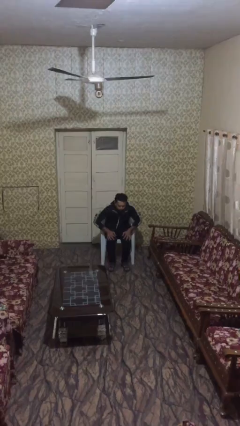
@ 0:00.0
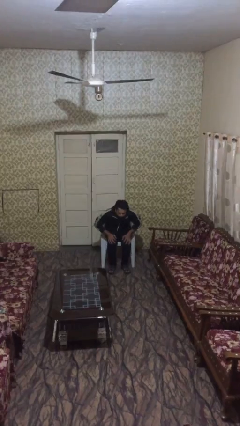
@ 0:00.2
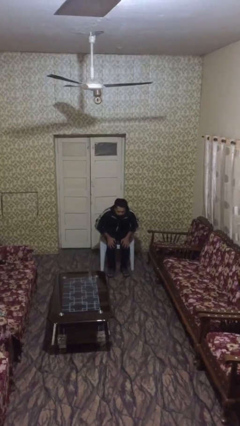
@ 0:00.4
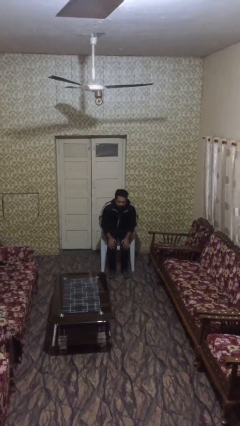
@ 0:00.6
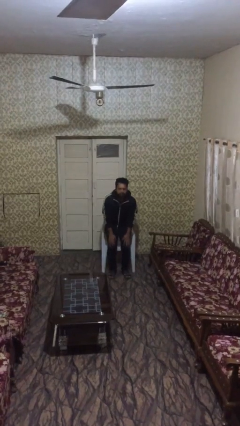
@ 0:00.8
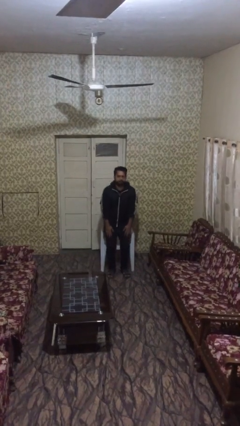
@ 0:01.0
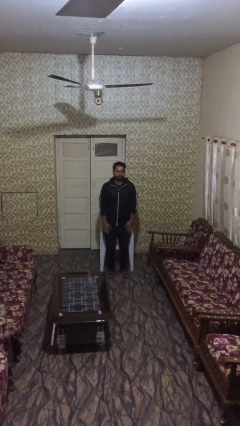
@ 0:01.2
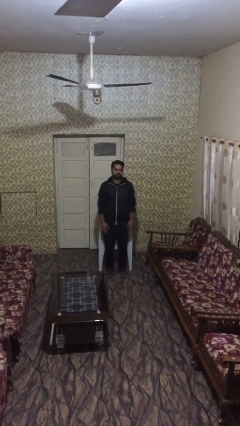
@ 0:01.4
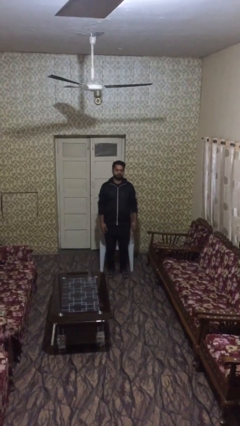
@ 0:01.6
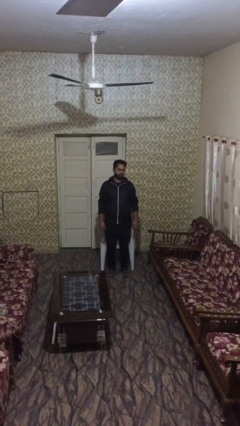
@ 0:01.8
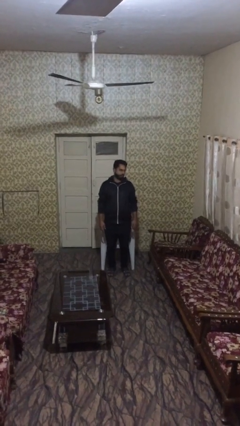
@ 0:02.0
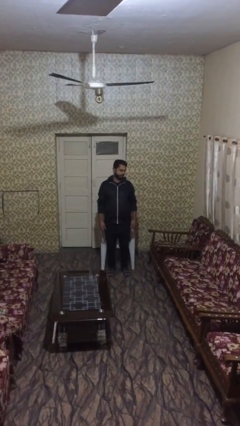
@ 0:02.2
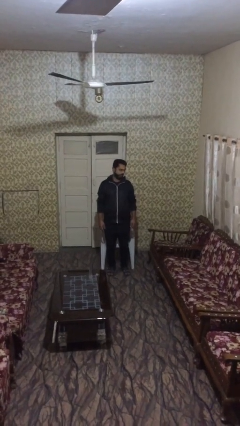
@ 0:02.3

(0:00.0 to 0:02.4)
person stands up

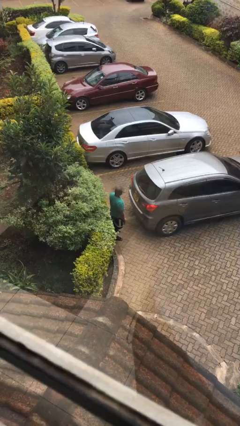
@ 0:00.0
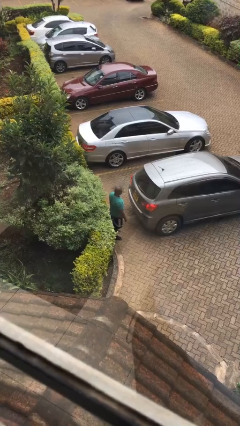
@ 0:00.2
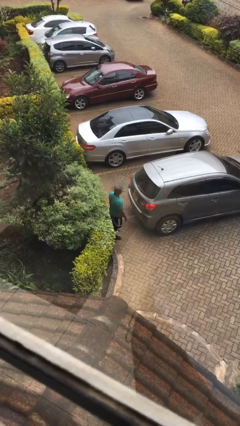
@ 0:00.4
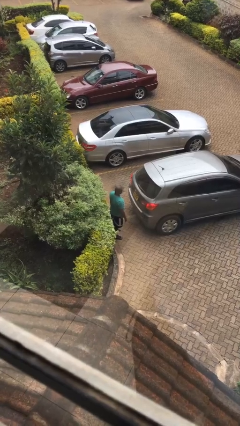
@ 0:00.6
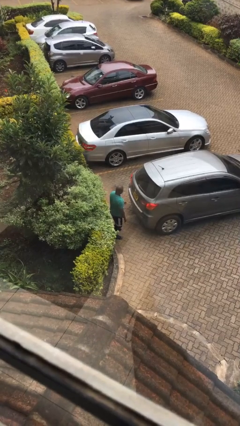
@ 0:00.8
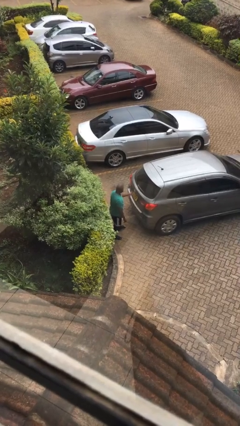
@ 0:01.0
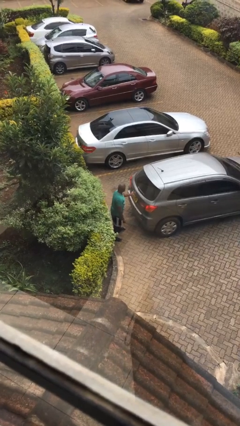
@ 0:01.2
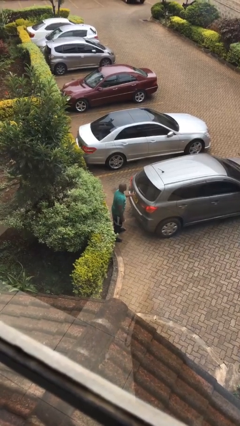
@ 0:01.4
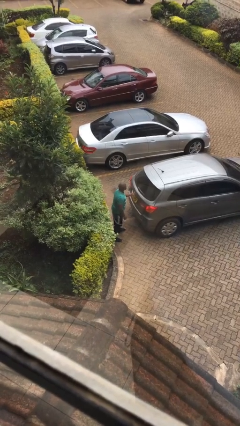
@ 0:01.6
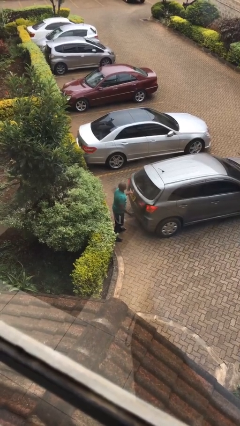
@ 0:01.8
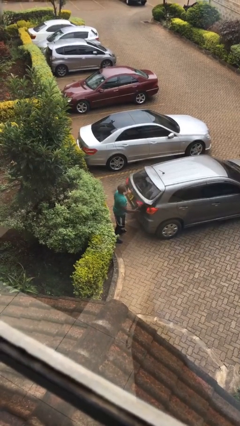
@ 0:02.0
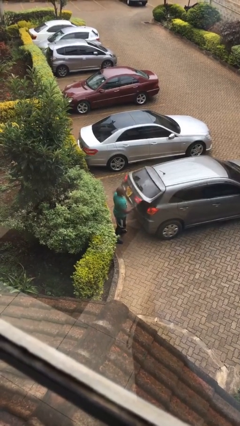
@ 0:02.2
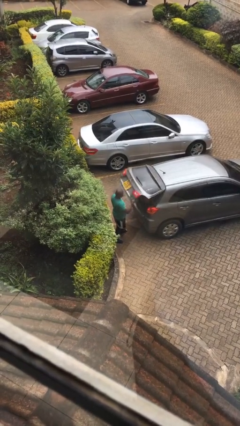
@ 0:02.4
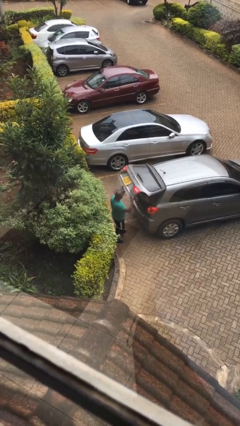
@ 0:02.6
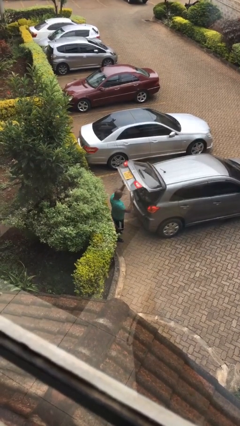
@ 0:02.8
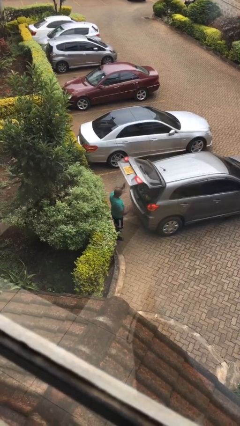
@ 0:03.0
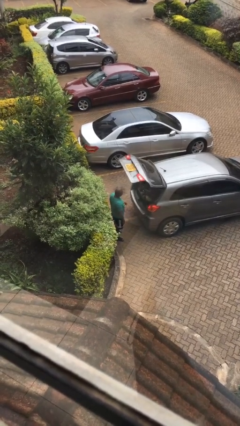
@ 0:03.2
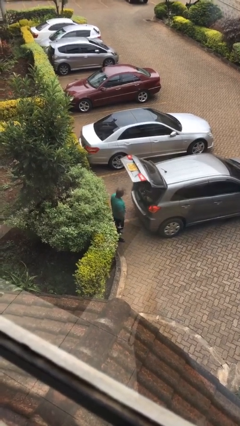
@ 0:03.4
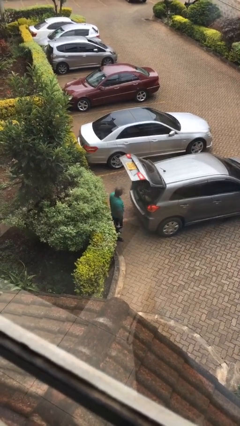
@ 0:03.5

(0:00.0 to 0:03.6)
person opens car trunk

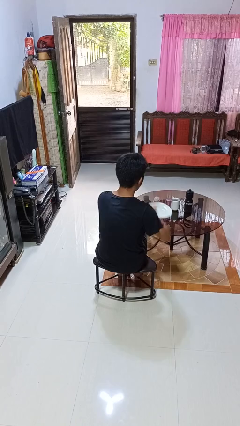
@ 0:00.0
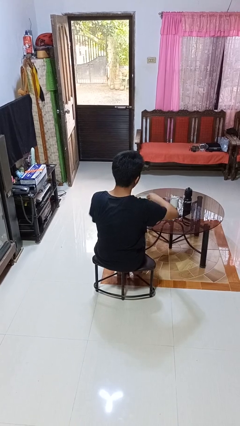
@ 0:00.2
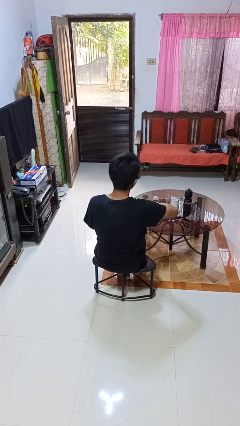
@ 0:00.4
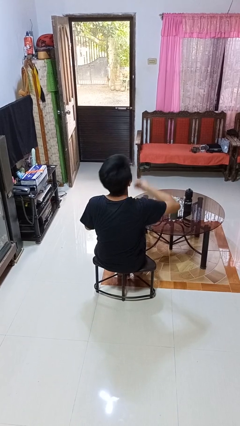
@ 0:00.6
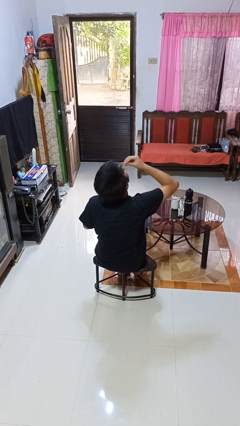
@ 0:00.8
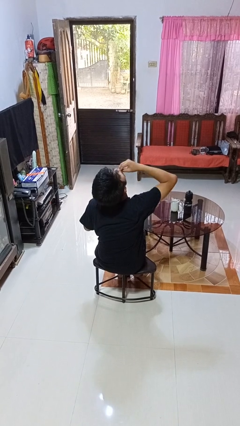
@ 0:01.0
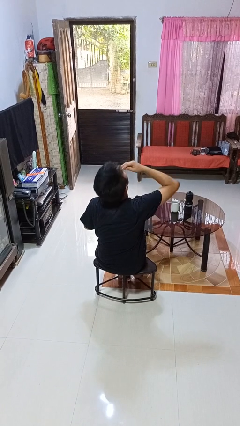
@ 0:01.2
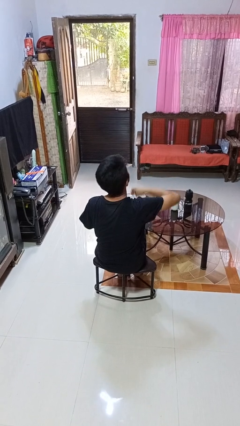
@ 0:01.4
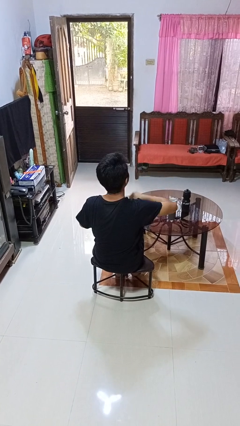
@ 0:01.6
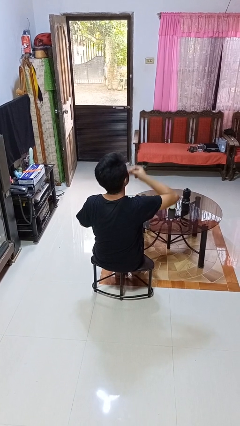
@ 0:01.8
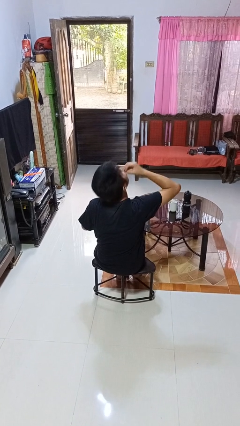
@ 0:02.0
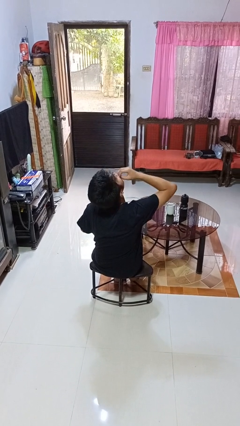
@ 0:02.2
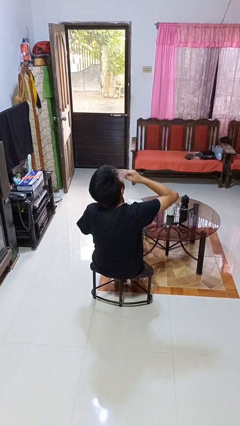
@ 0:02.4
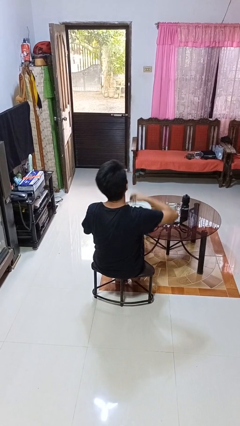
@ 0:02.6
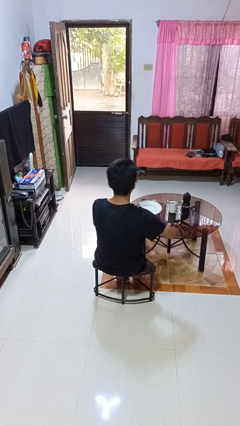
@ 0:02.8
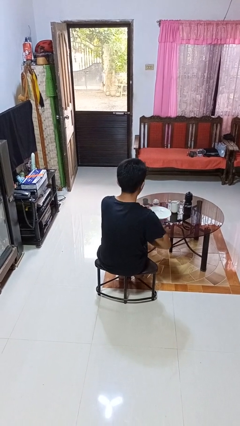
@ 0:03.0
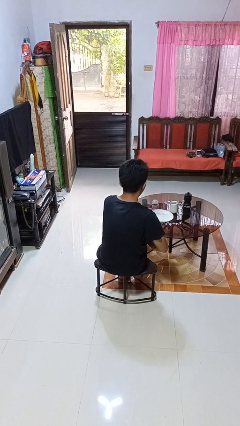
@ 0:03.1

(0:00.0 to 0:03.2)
person eats with hands

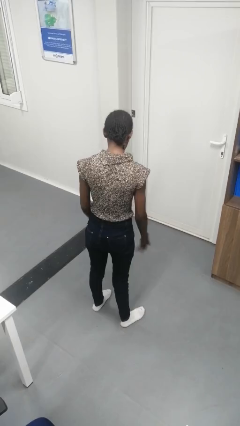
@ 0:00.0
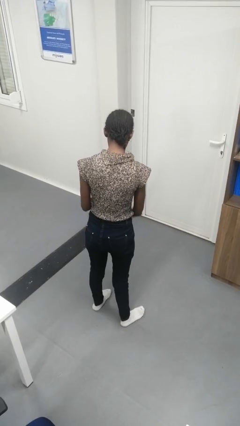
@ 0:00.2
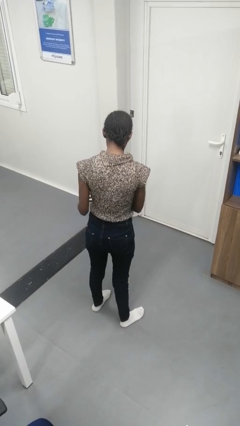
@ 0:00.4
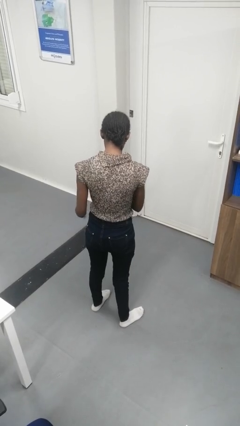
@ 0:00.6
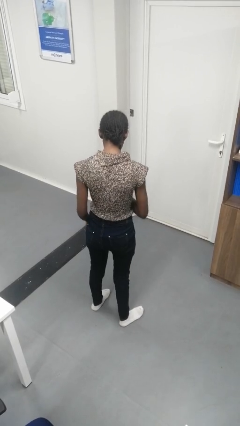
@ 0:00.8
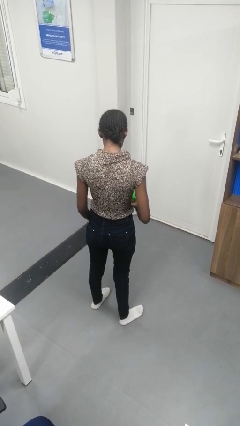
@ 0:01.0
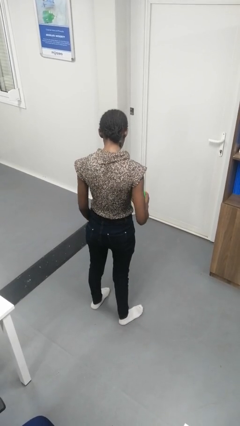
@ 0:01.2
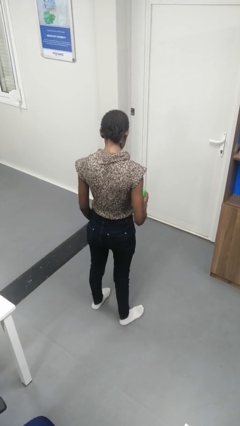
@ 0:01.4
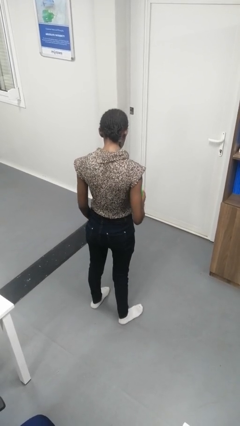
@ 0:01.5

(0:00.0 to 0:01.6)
person bounces ball on floor

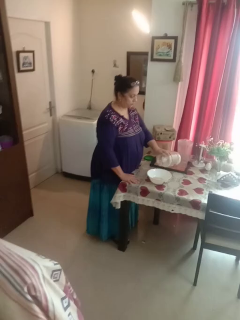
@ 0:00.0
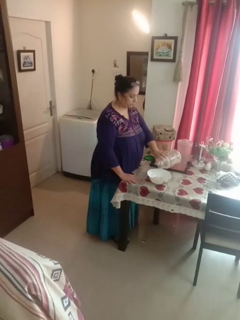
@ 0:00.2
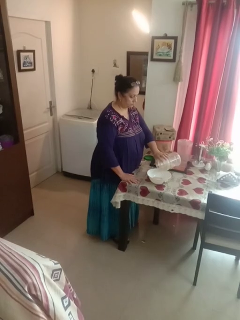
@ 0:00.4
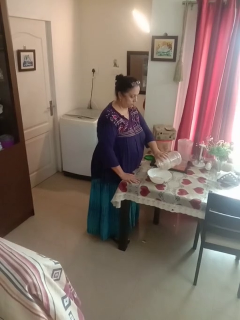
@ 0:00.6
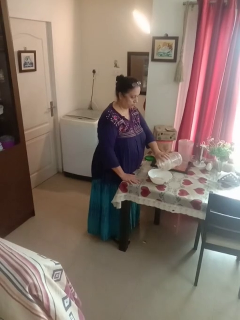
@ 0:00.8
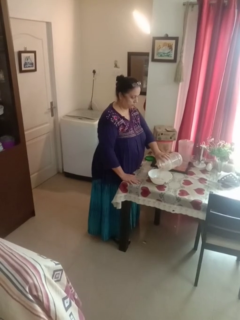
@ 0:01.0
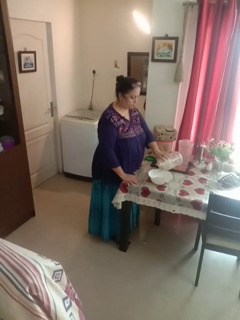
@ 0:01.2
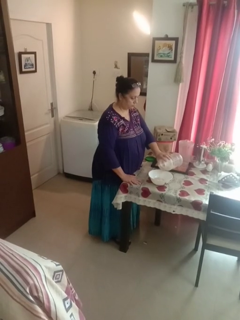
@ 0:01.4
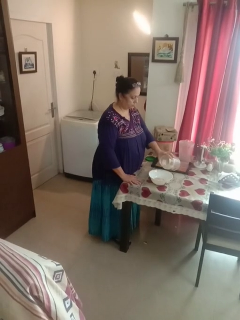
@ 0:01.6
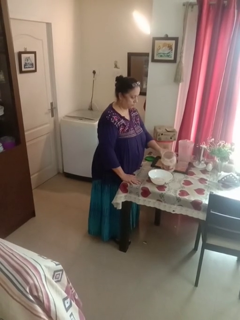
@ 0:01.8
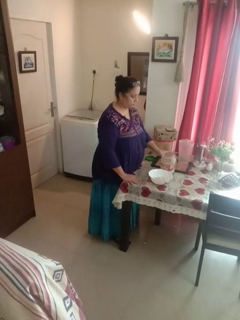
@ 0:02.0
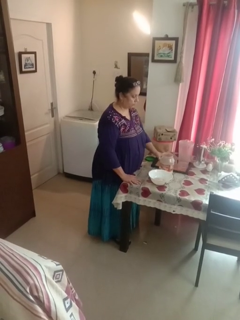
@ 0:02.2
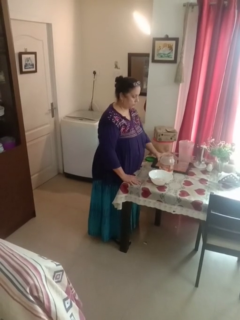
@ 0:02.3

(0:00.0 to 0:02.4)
person pours into bowl

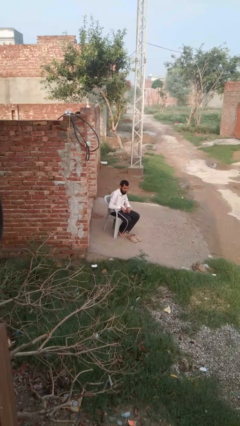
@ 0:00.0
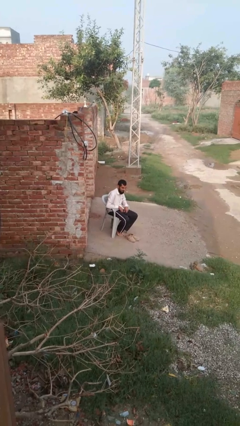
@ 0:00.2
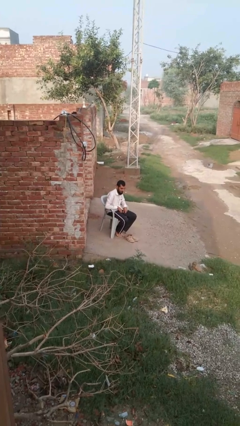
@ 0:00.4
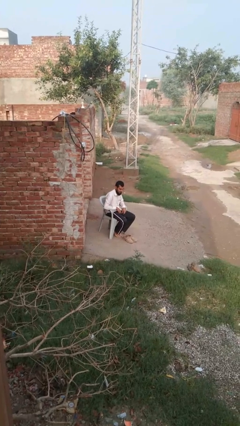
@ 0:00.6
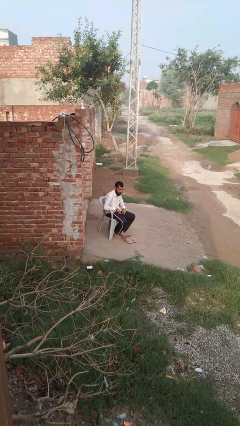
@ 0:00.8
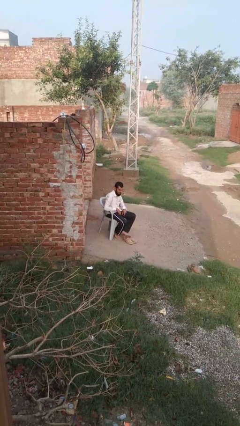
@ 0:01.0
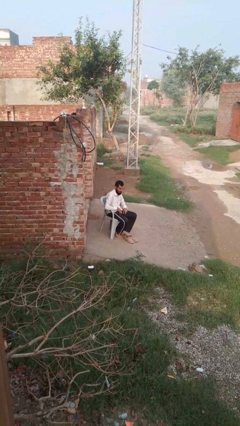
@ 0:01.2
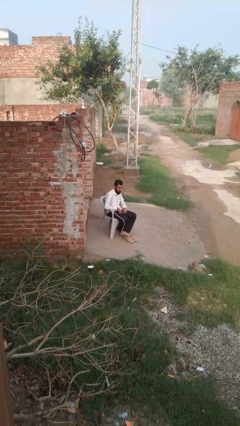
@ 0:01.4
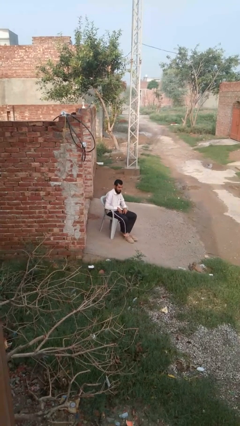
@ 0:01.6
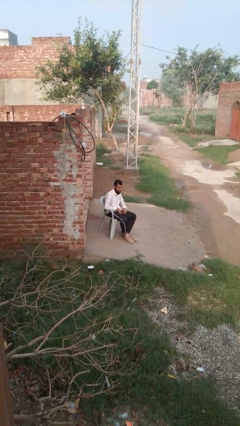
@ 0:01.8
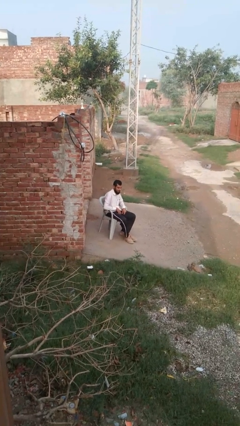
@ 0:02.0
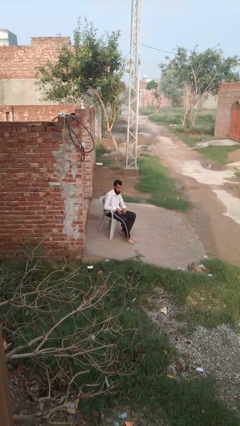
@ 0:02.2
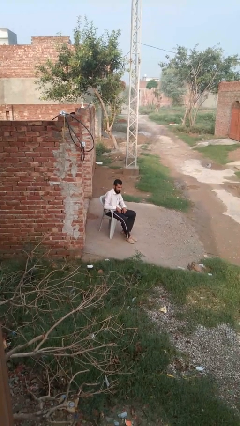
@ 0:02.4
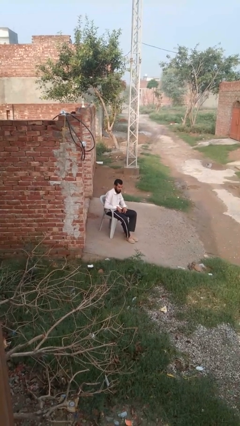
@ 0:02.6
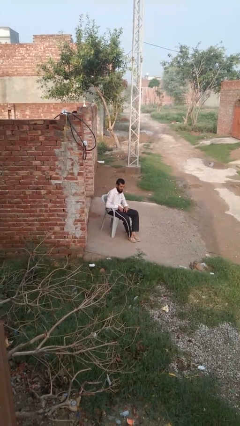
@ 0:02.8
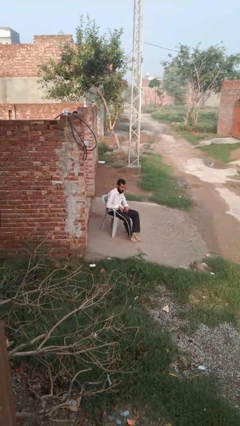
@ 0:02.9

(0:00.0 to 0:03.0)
person puts on shoes

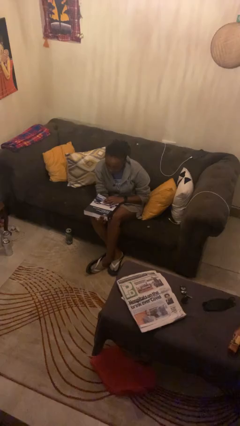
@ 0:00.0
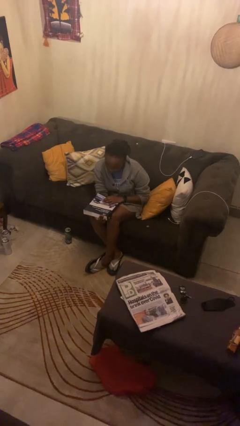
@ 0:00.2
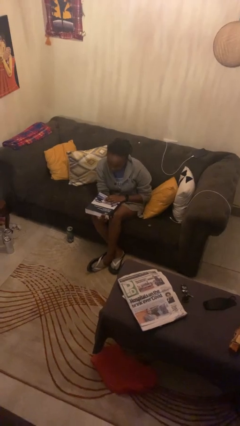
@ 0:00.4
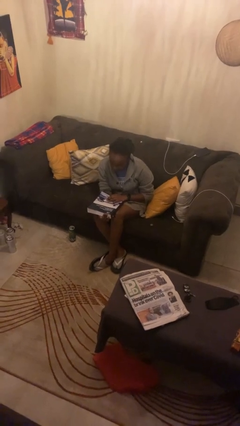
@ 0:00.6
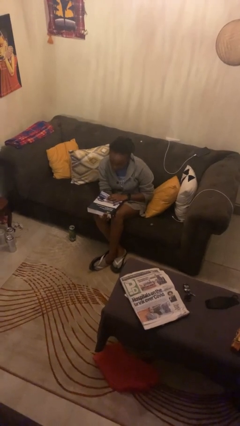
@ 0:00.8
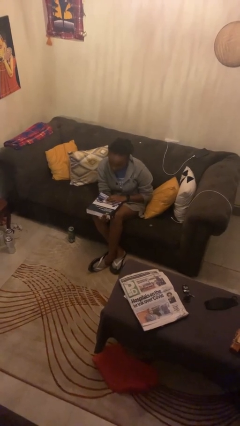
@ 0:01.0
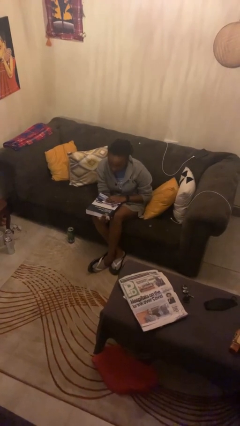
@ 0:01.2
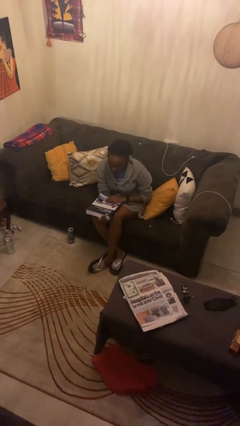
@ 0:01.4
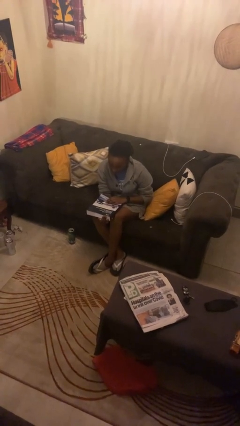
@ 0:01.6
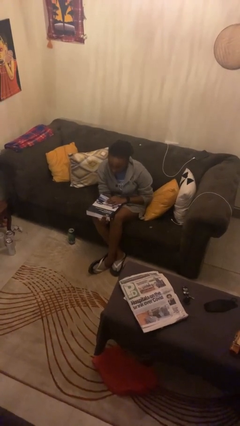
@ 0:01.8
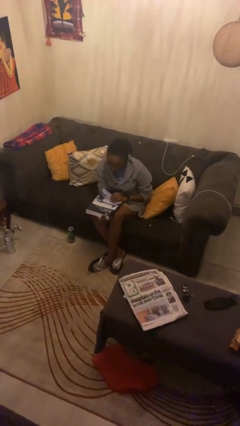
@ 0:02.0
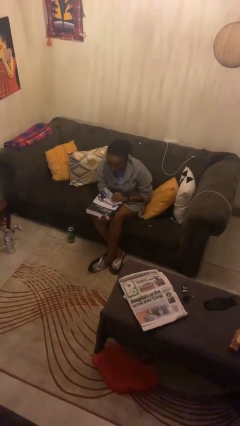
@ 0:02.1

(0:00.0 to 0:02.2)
person reads book
